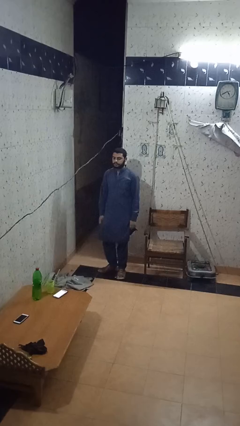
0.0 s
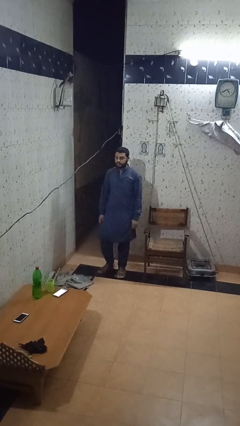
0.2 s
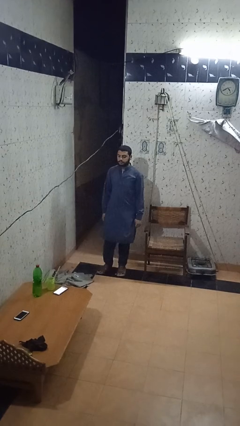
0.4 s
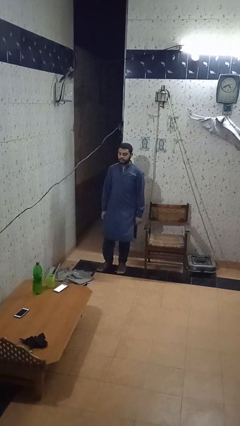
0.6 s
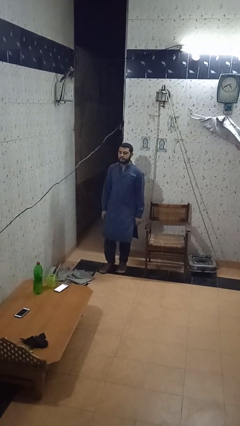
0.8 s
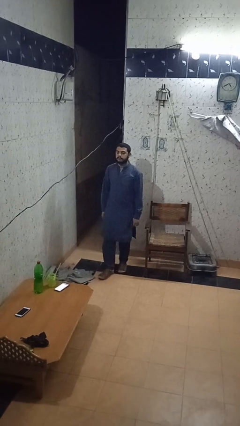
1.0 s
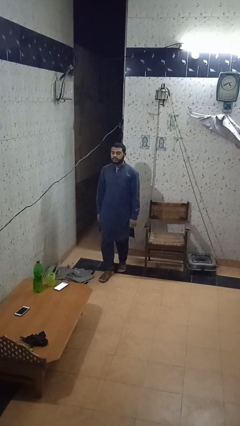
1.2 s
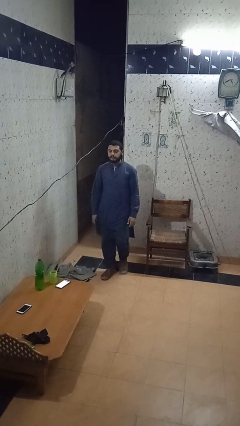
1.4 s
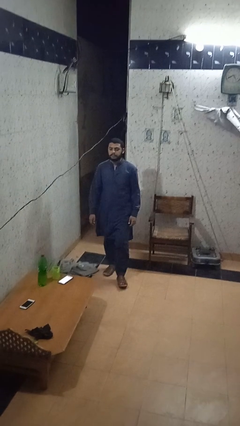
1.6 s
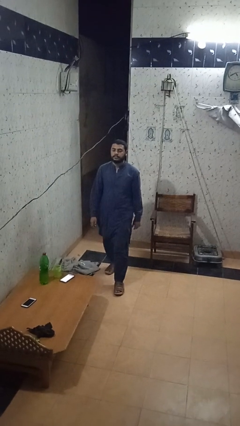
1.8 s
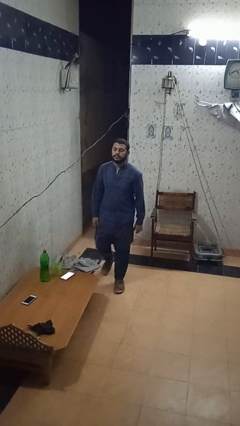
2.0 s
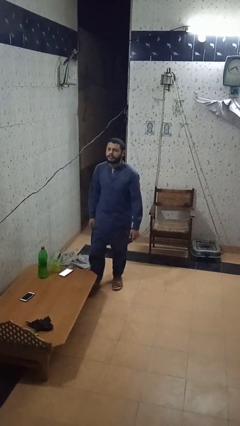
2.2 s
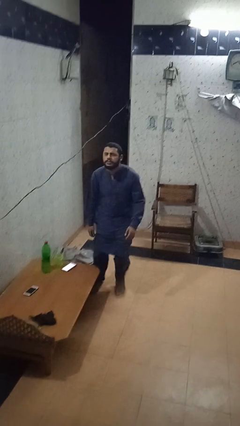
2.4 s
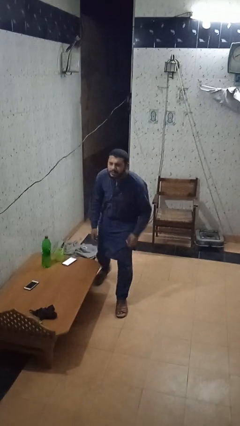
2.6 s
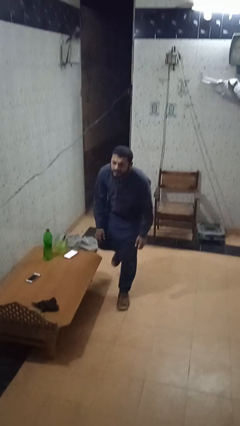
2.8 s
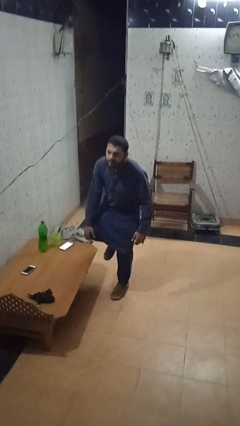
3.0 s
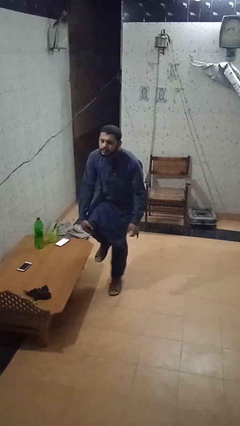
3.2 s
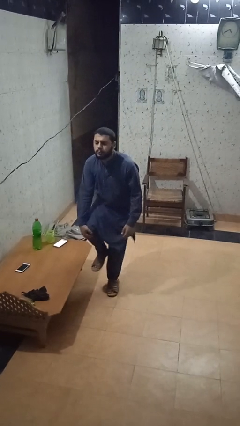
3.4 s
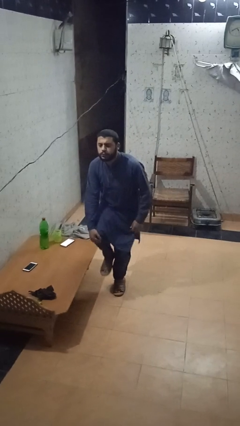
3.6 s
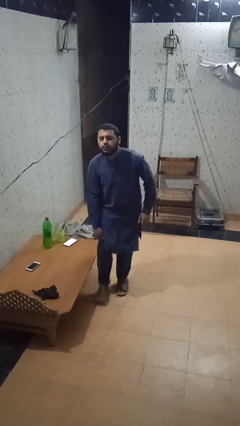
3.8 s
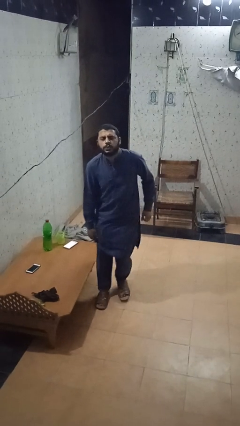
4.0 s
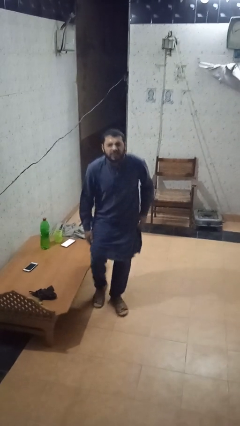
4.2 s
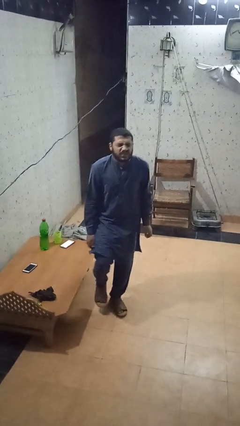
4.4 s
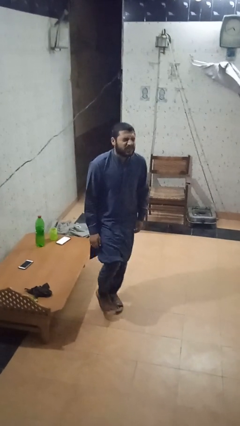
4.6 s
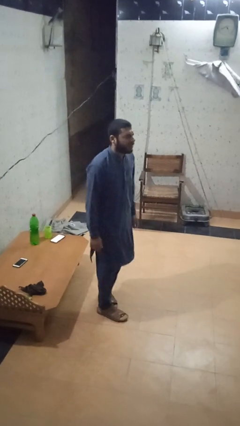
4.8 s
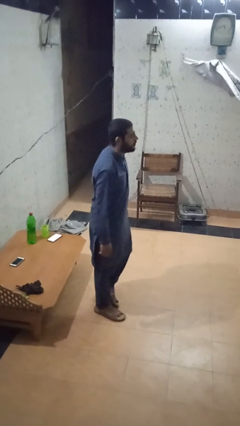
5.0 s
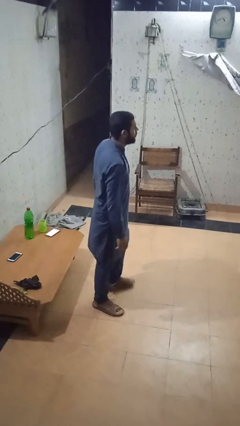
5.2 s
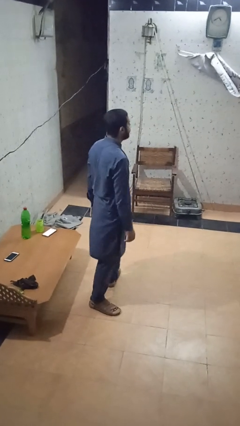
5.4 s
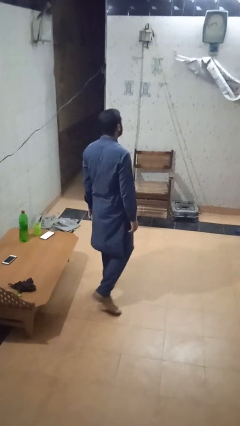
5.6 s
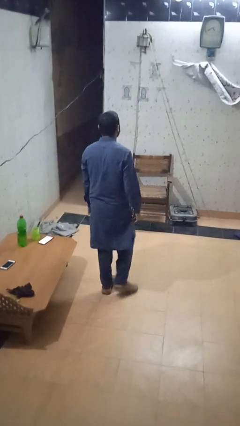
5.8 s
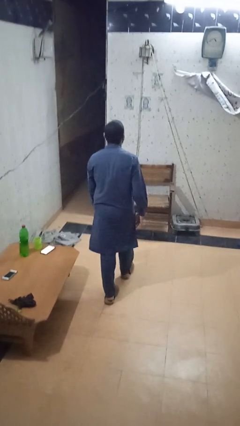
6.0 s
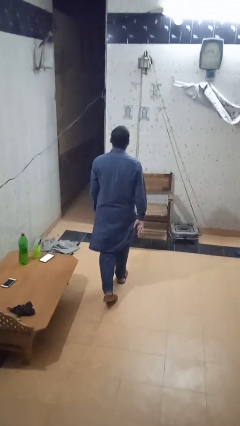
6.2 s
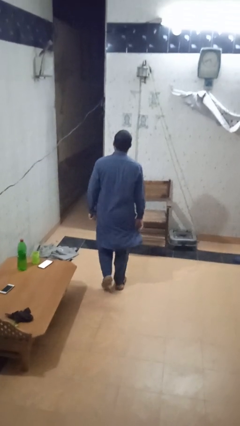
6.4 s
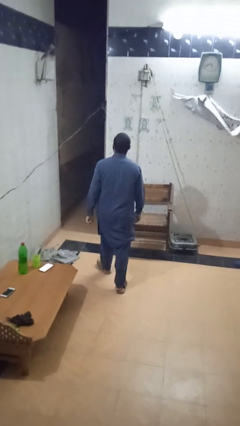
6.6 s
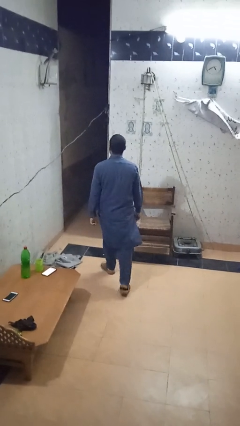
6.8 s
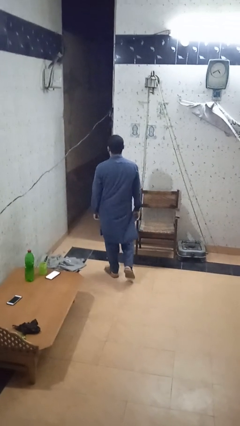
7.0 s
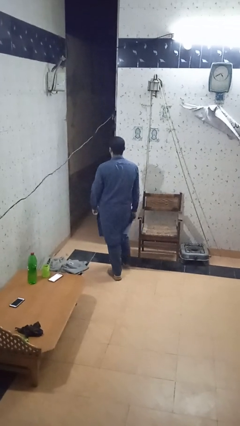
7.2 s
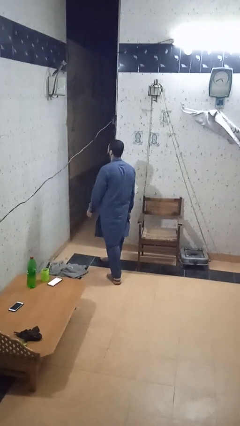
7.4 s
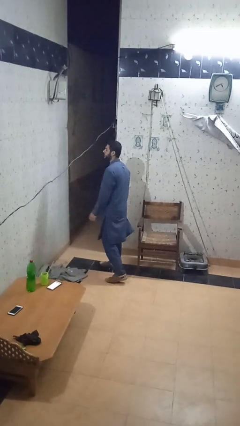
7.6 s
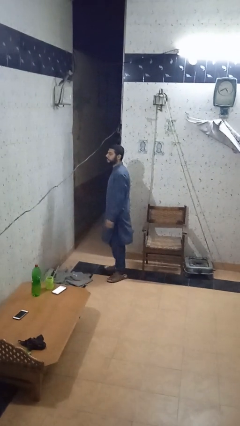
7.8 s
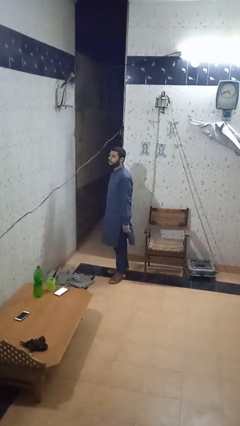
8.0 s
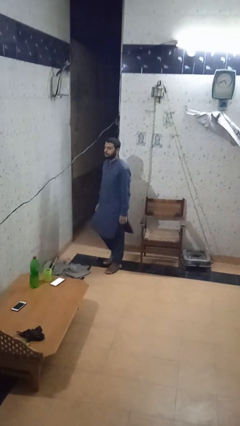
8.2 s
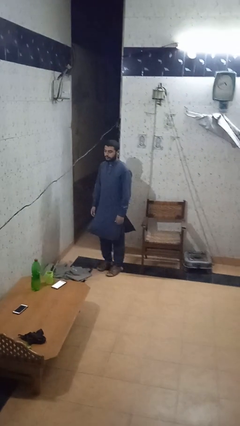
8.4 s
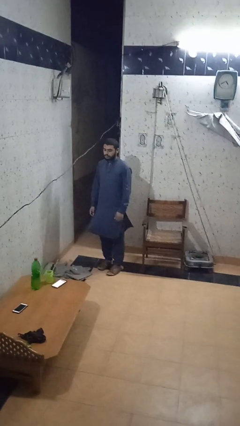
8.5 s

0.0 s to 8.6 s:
person bumps into table

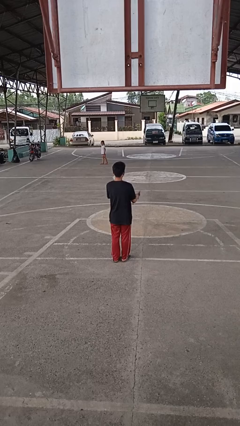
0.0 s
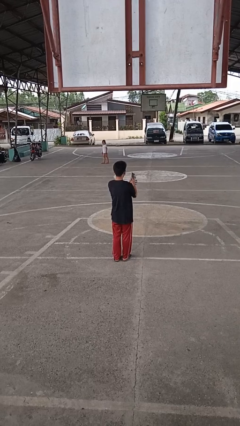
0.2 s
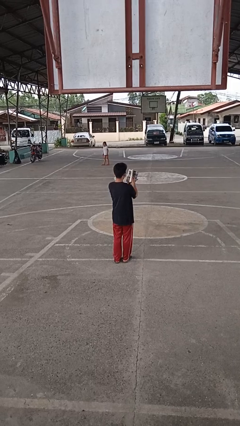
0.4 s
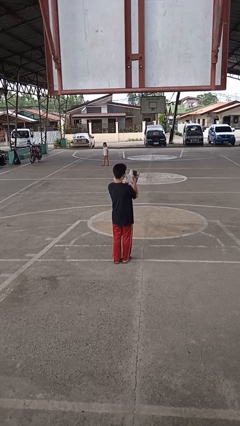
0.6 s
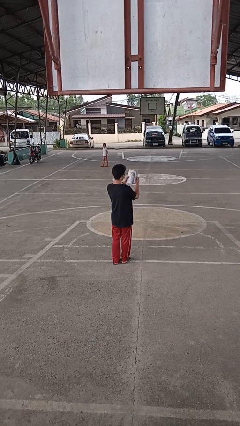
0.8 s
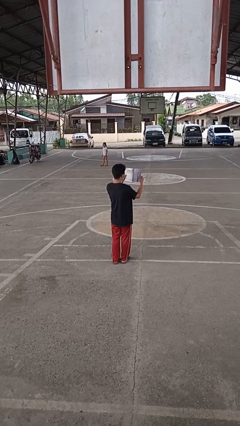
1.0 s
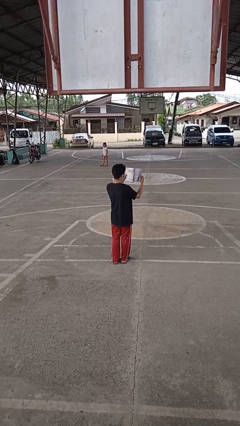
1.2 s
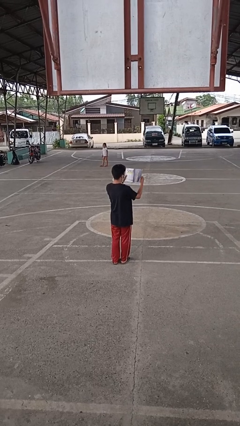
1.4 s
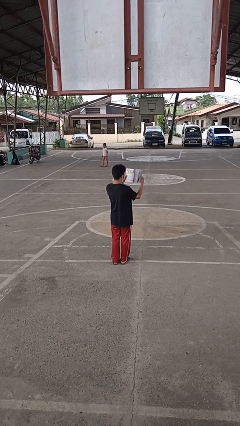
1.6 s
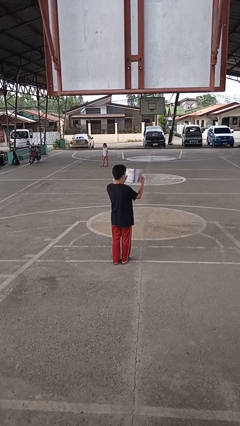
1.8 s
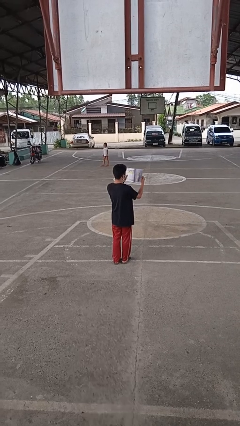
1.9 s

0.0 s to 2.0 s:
person reads magazine

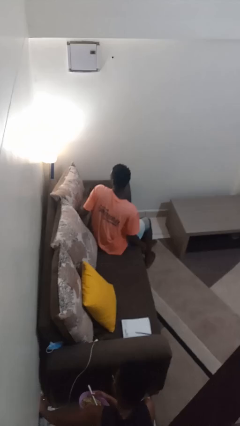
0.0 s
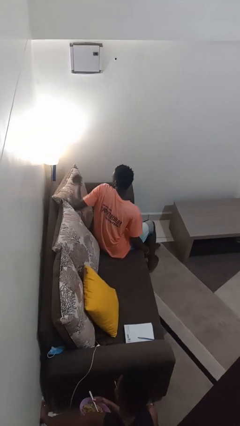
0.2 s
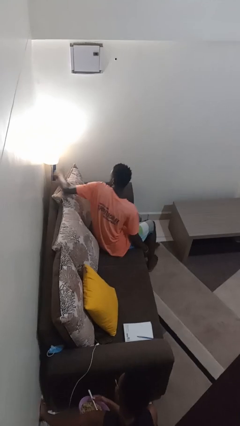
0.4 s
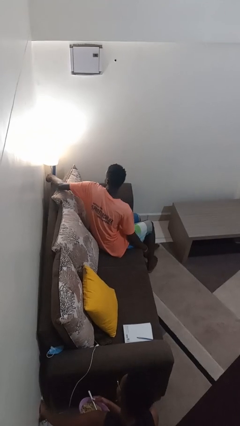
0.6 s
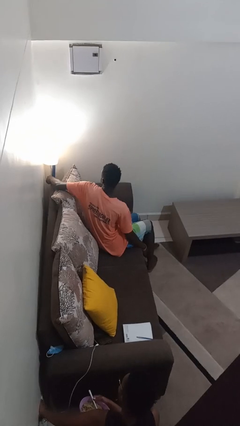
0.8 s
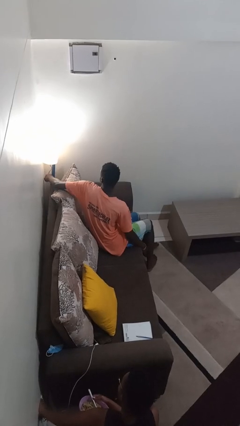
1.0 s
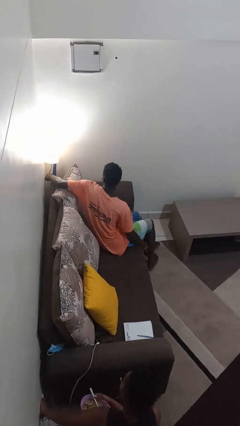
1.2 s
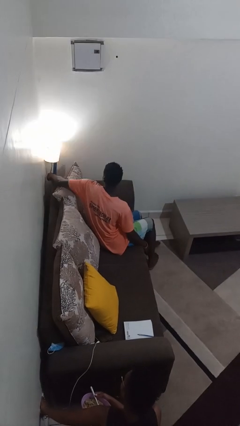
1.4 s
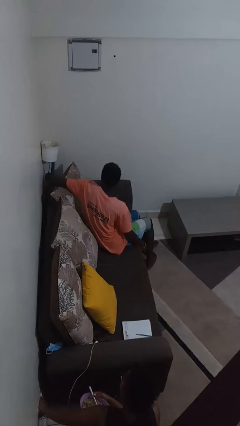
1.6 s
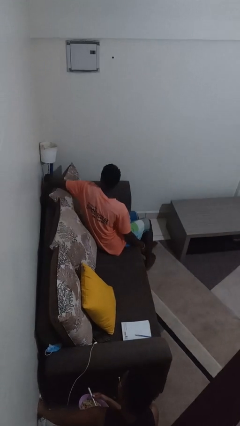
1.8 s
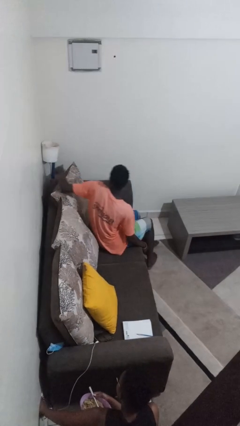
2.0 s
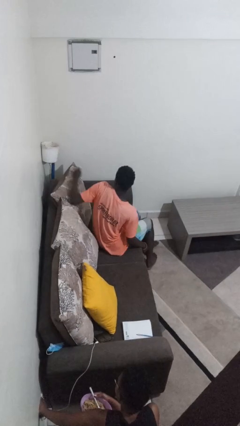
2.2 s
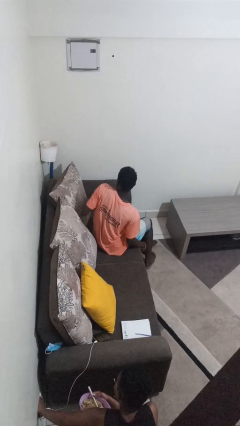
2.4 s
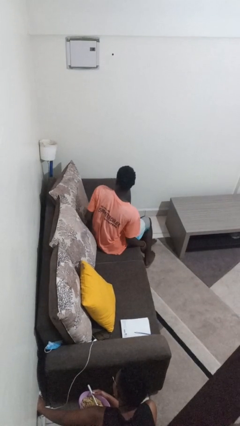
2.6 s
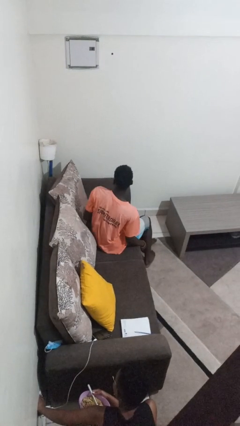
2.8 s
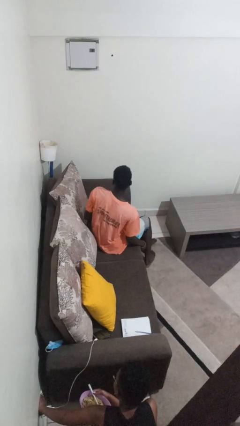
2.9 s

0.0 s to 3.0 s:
person turns off lamp

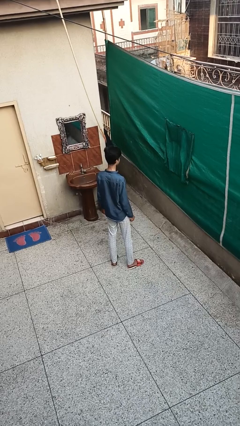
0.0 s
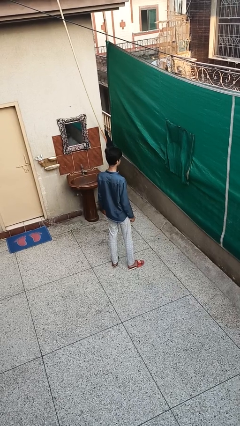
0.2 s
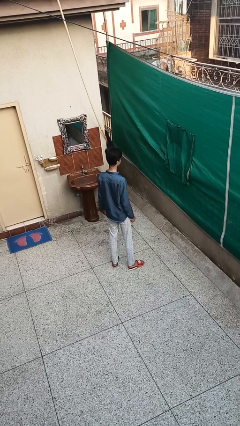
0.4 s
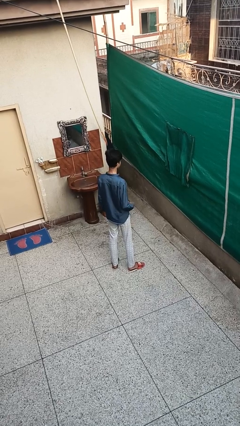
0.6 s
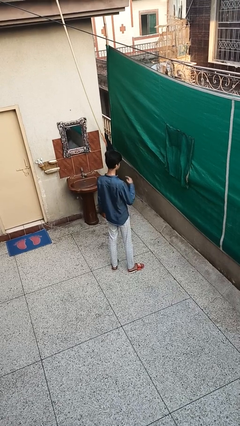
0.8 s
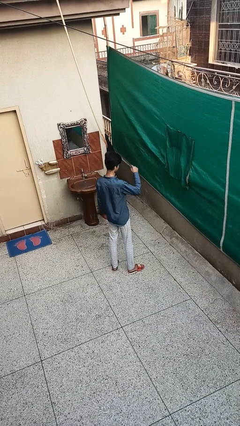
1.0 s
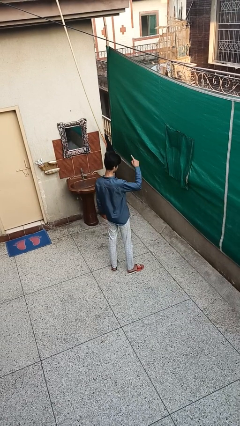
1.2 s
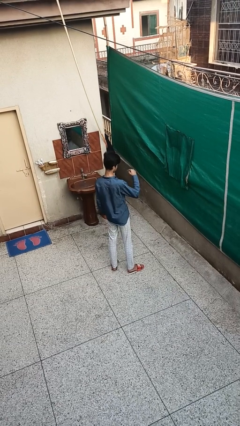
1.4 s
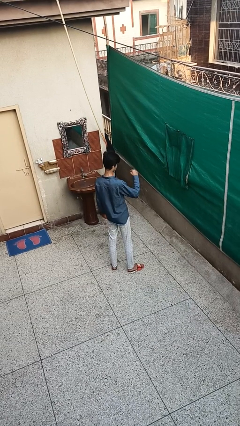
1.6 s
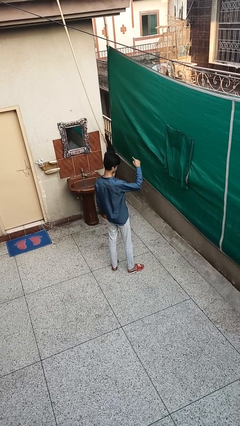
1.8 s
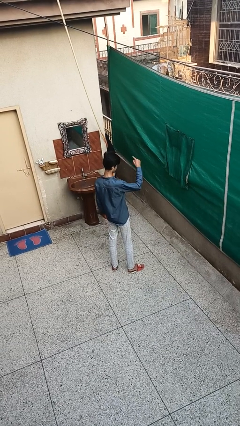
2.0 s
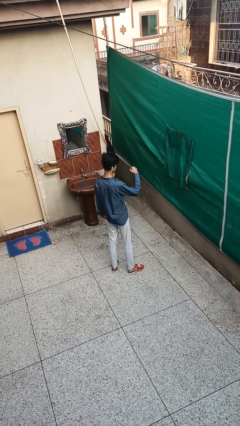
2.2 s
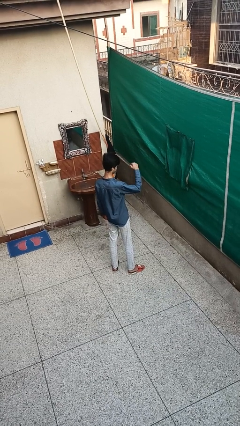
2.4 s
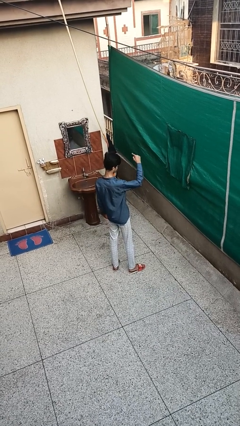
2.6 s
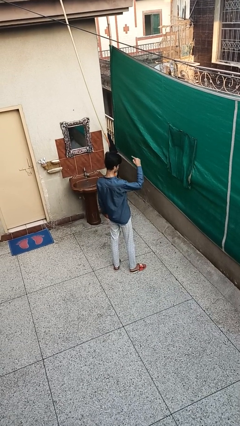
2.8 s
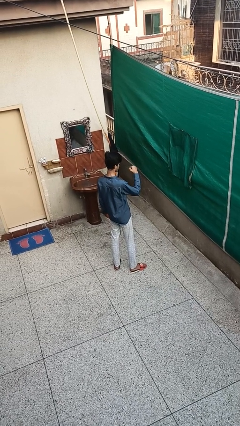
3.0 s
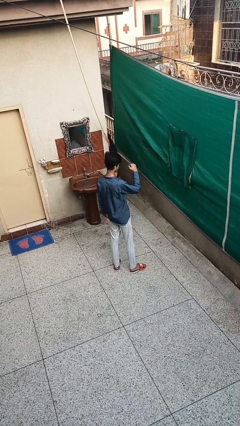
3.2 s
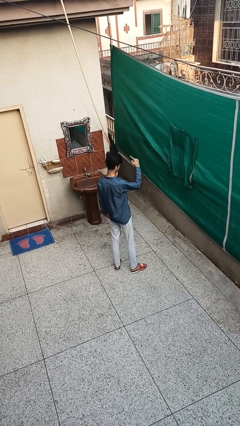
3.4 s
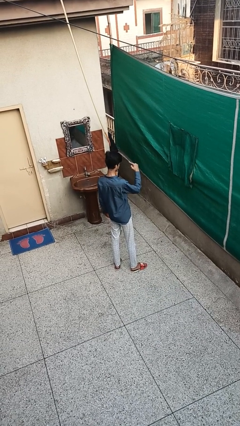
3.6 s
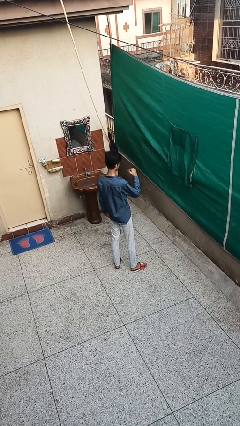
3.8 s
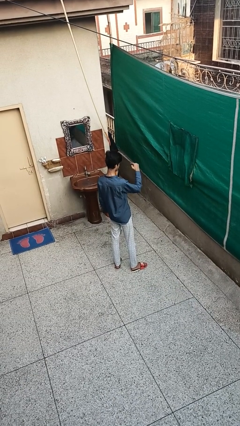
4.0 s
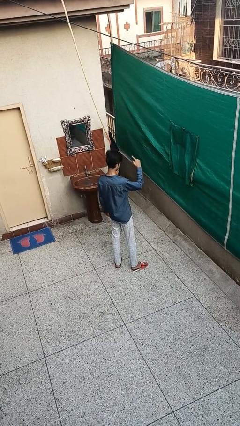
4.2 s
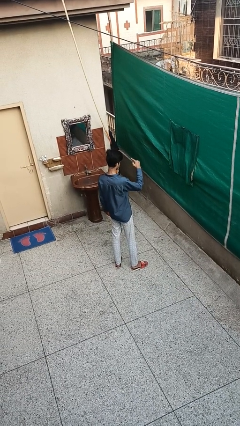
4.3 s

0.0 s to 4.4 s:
person gestures swipe up
